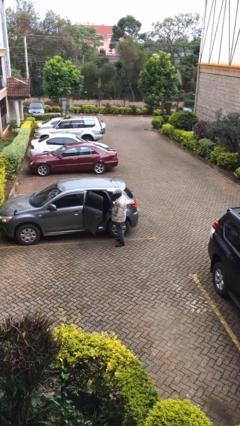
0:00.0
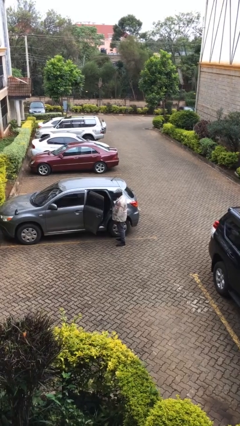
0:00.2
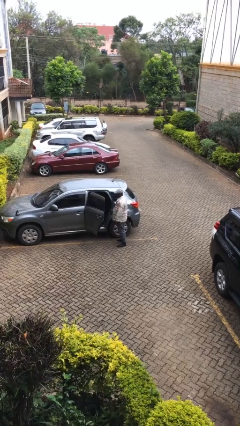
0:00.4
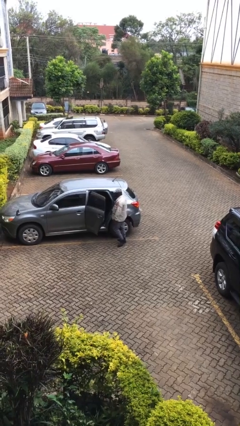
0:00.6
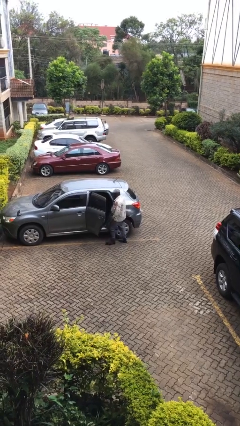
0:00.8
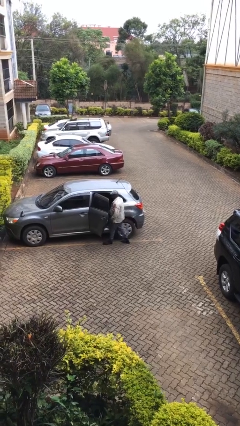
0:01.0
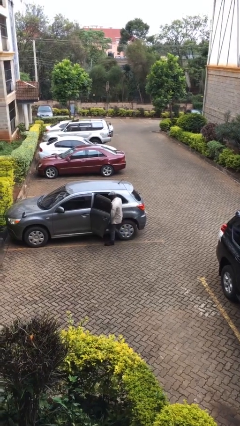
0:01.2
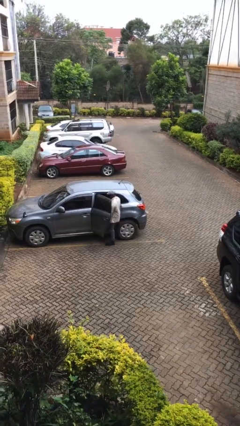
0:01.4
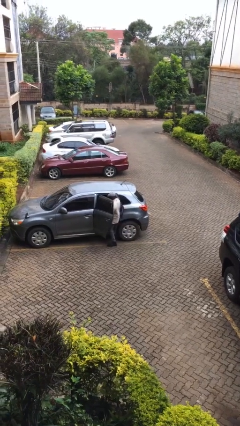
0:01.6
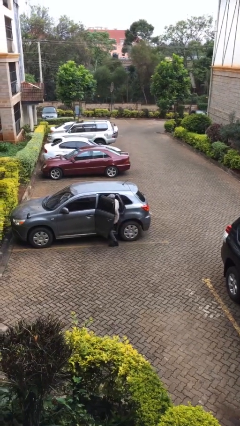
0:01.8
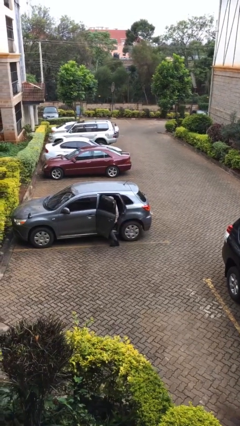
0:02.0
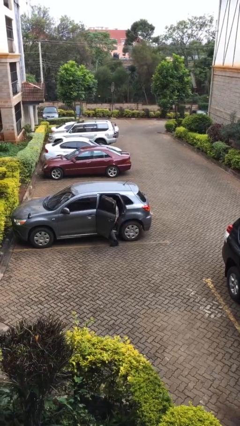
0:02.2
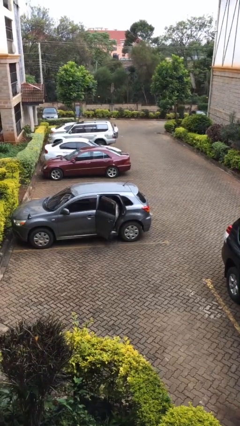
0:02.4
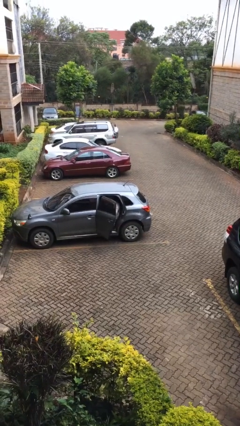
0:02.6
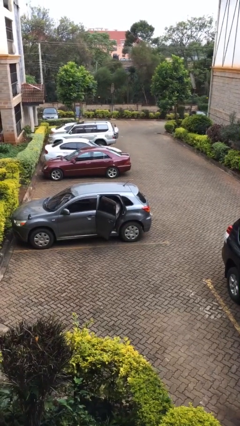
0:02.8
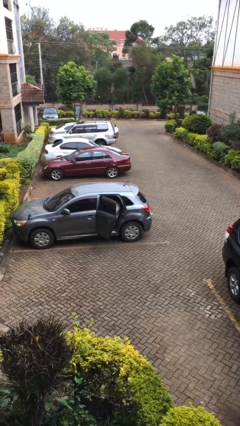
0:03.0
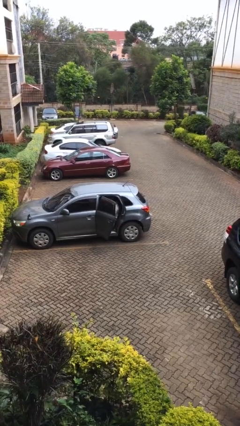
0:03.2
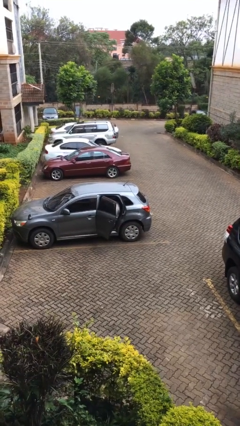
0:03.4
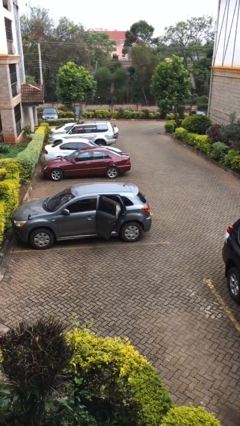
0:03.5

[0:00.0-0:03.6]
person enters car

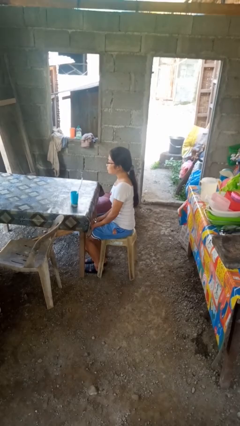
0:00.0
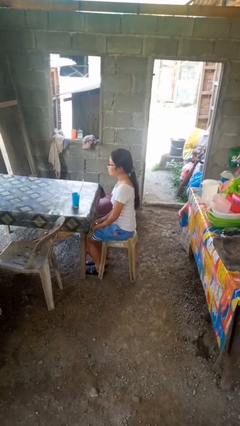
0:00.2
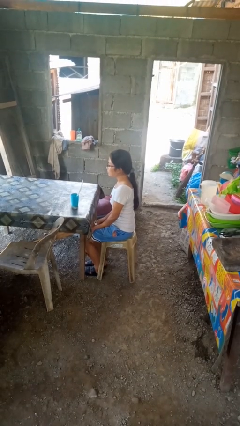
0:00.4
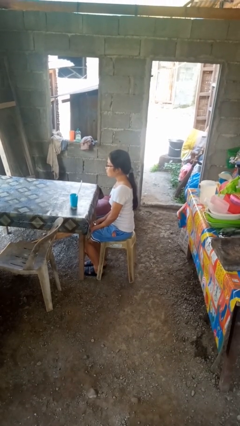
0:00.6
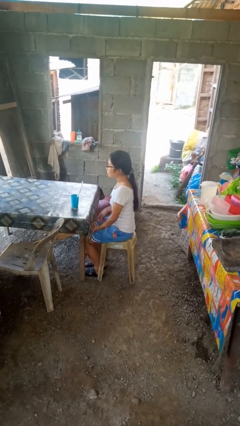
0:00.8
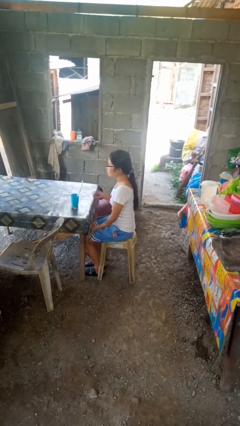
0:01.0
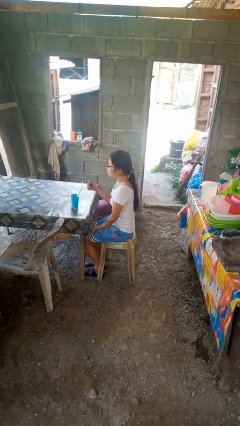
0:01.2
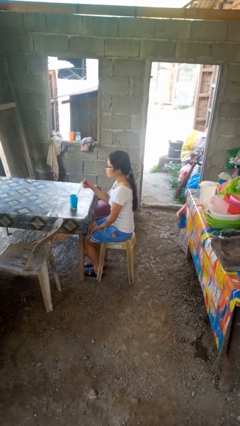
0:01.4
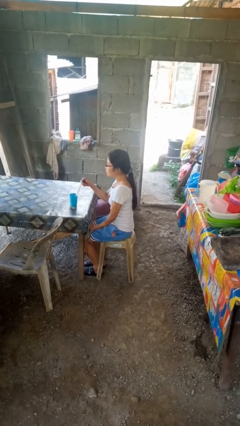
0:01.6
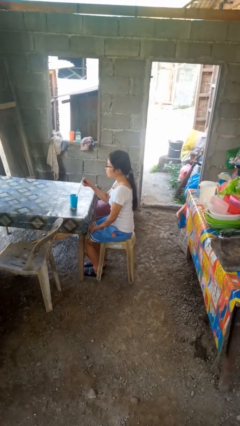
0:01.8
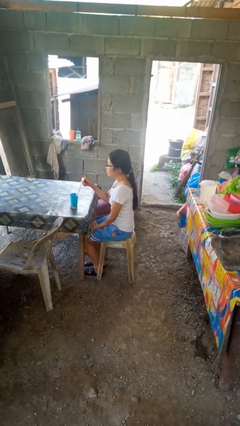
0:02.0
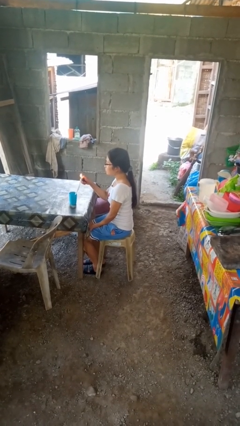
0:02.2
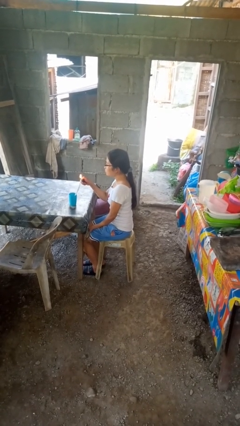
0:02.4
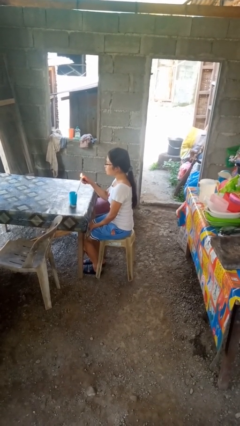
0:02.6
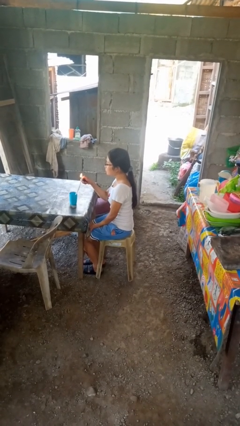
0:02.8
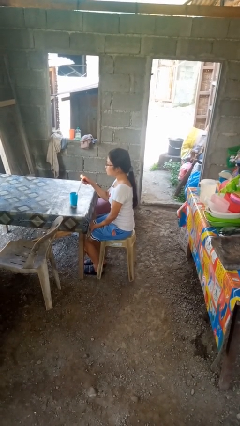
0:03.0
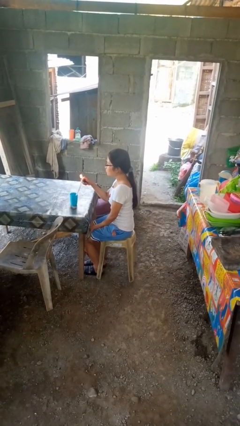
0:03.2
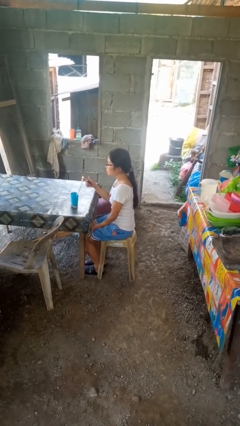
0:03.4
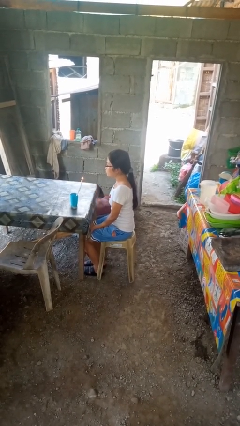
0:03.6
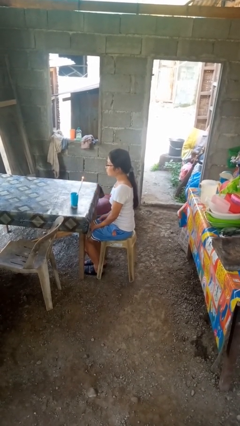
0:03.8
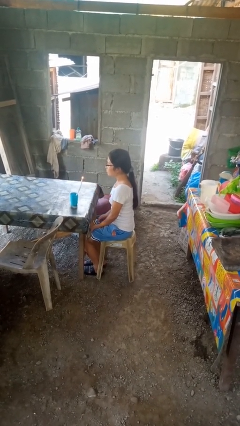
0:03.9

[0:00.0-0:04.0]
person lights candle

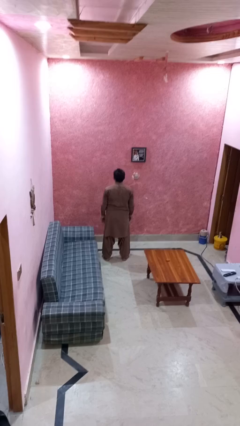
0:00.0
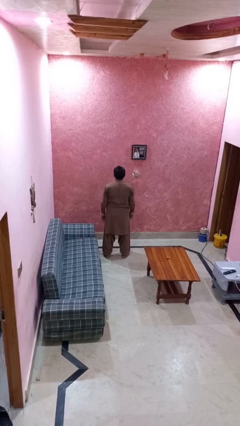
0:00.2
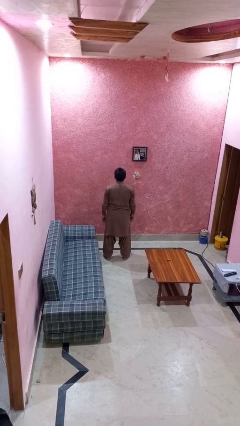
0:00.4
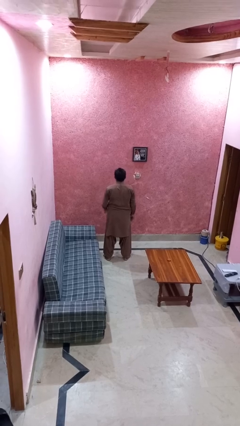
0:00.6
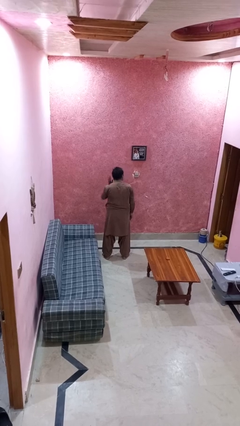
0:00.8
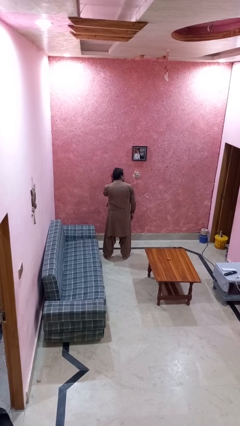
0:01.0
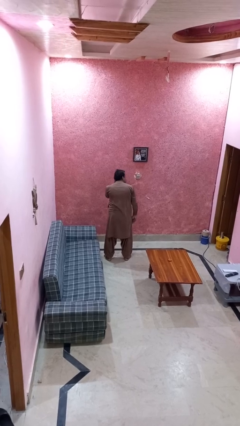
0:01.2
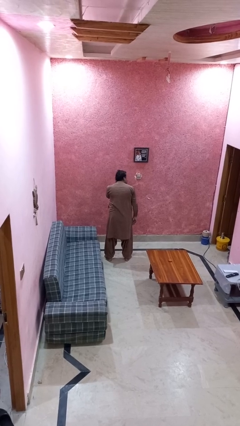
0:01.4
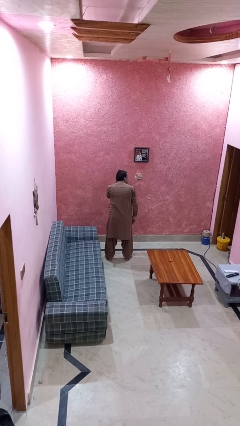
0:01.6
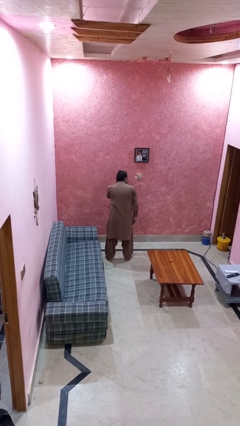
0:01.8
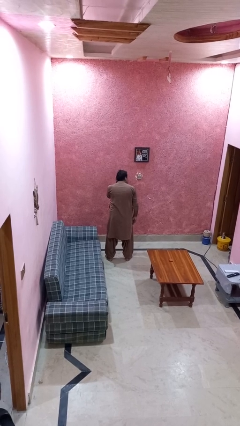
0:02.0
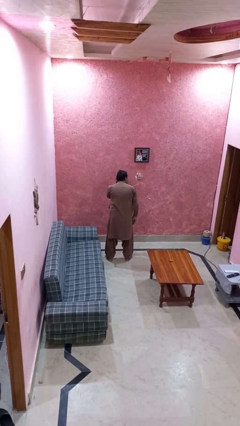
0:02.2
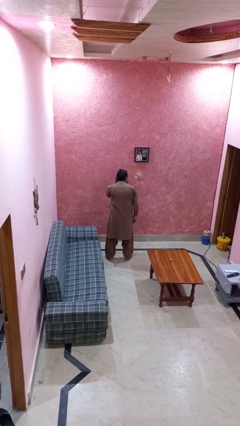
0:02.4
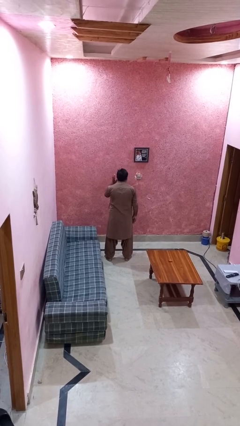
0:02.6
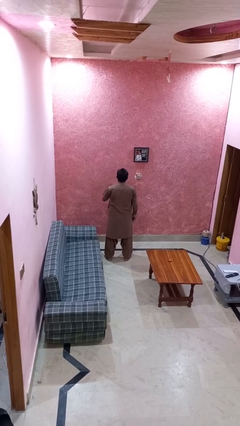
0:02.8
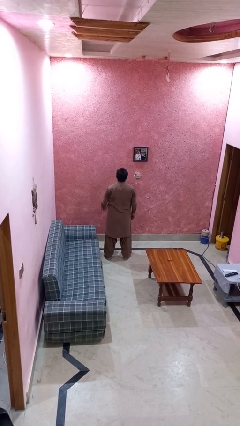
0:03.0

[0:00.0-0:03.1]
person gestures listen closely

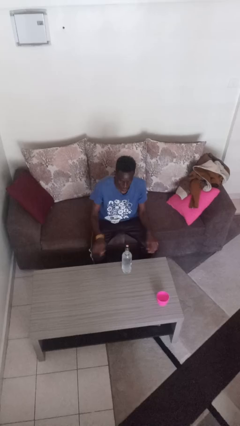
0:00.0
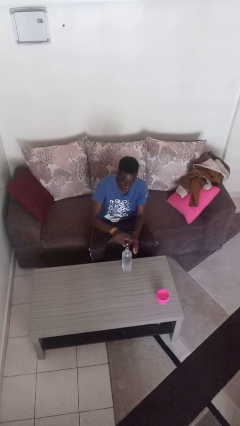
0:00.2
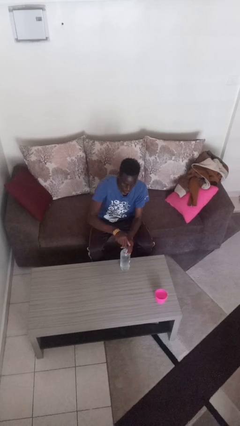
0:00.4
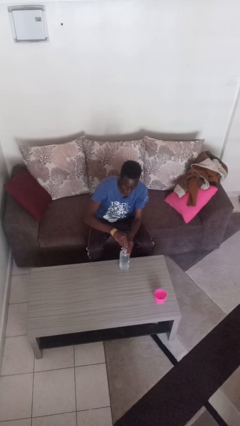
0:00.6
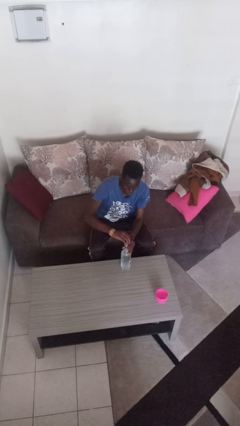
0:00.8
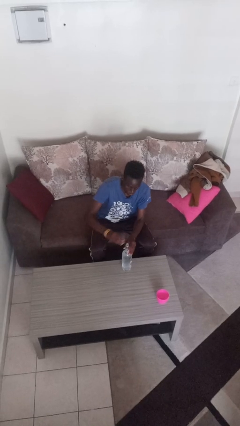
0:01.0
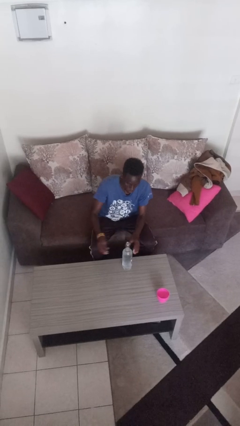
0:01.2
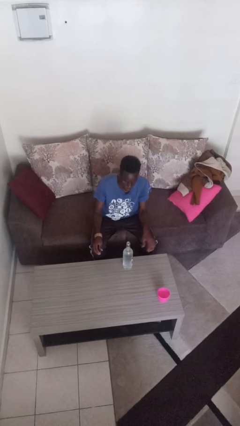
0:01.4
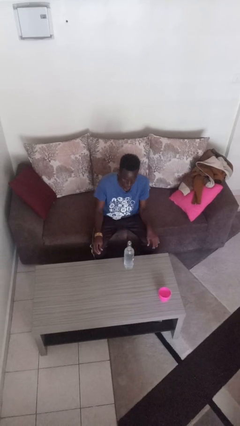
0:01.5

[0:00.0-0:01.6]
person unscrews lid from bottle

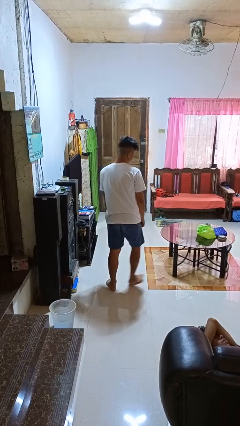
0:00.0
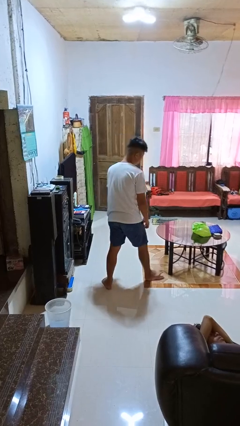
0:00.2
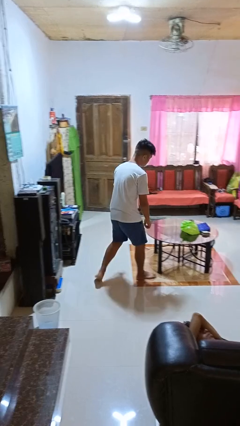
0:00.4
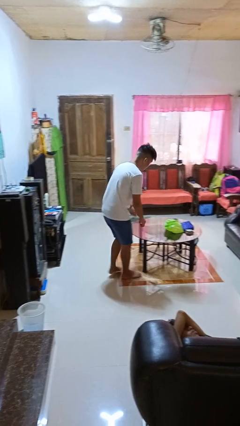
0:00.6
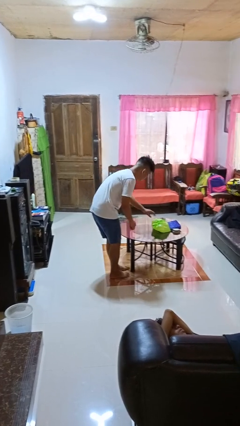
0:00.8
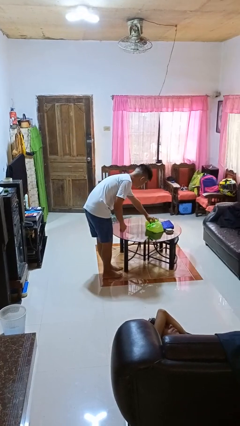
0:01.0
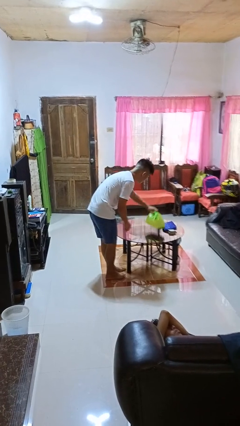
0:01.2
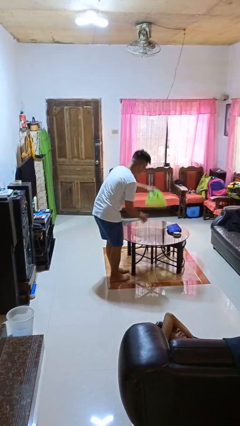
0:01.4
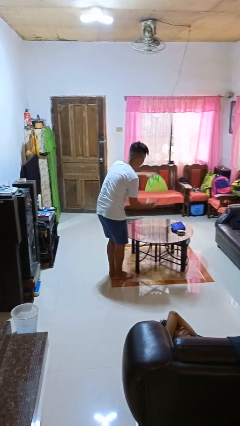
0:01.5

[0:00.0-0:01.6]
person picks up object from table

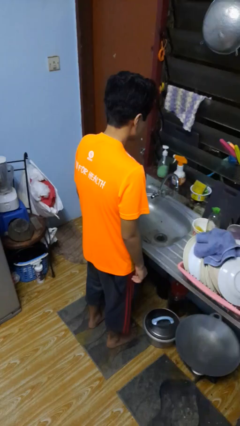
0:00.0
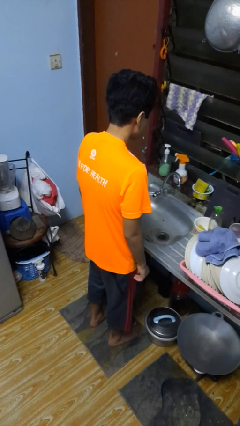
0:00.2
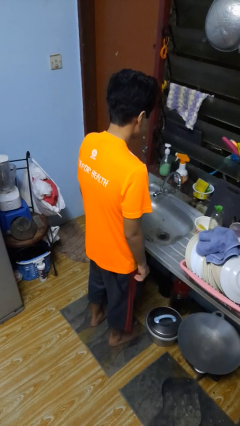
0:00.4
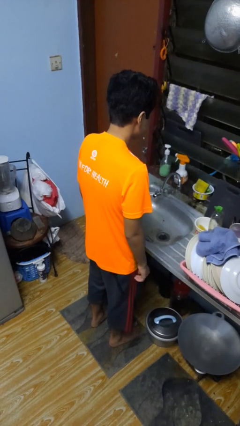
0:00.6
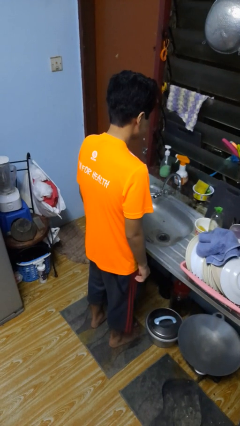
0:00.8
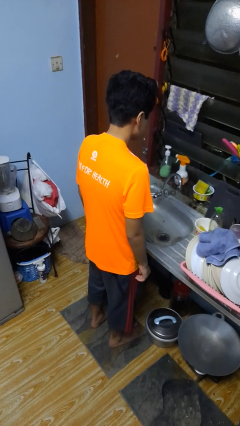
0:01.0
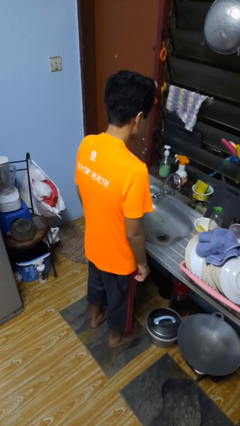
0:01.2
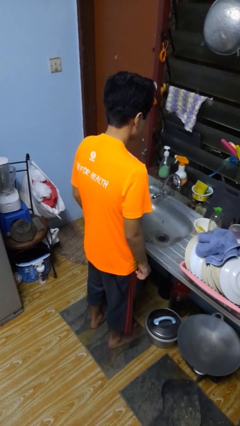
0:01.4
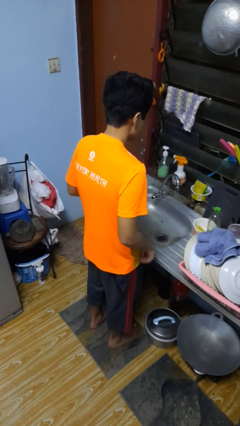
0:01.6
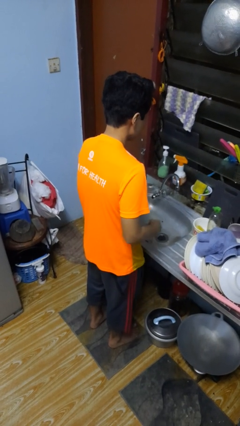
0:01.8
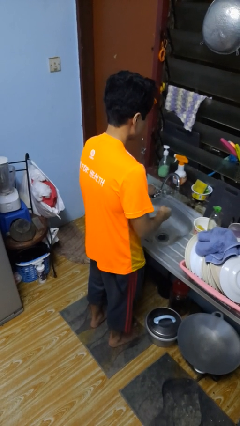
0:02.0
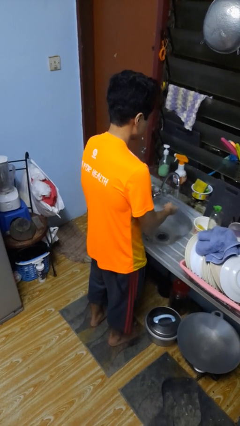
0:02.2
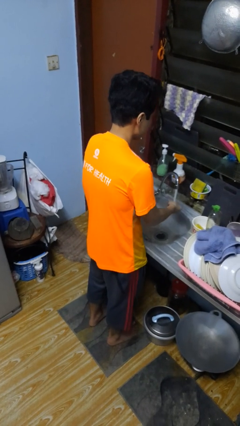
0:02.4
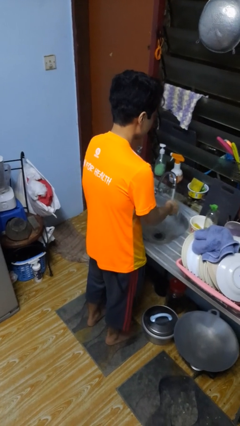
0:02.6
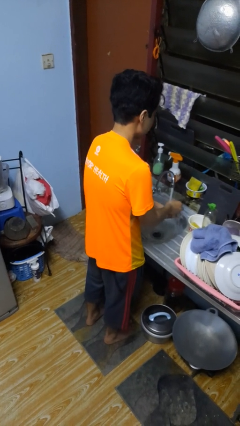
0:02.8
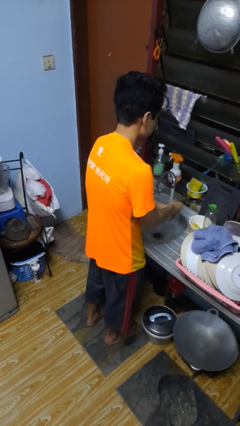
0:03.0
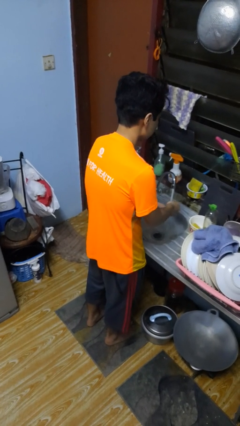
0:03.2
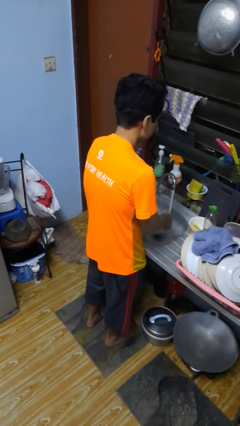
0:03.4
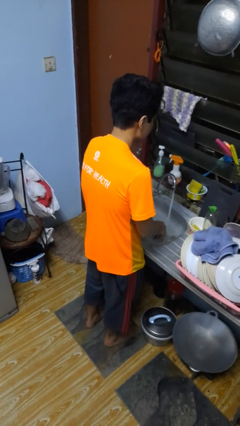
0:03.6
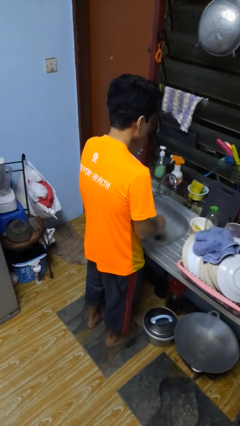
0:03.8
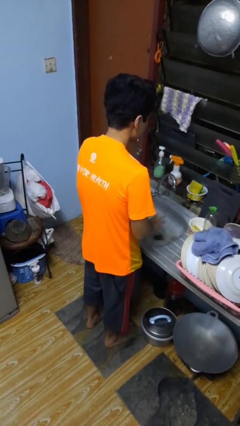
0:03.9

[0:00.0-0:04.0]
person washes hands
